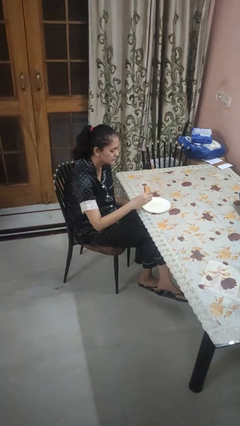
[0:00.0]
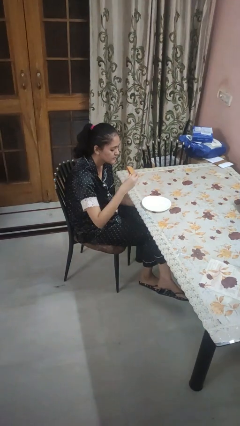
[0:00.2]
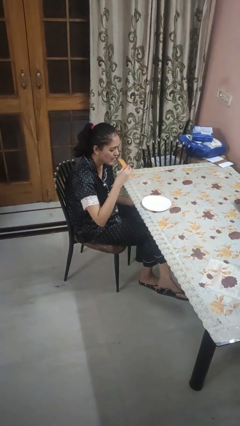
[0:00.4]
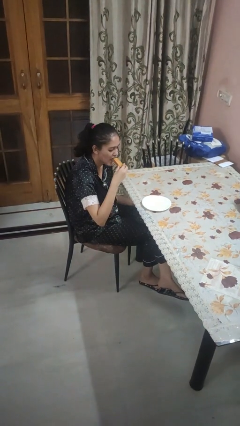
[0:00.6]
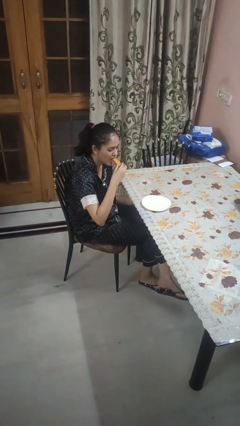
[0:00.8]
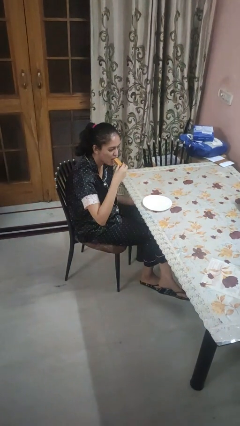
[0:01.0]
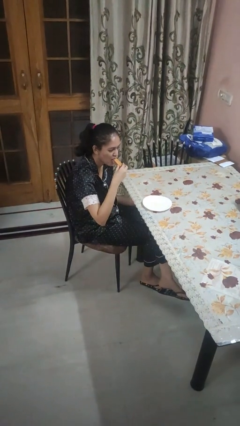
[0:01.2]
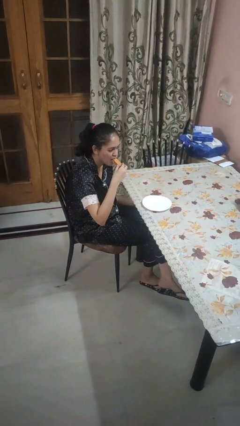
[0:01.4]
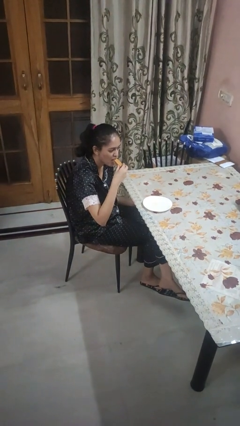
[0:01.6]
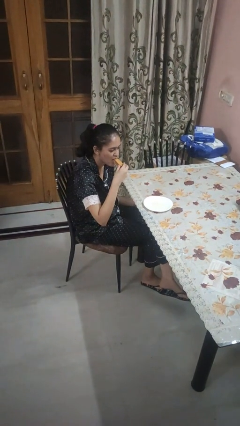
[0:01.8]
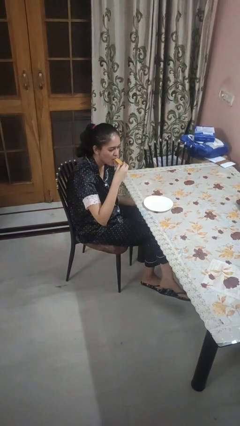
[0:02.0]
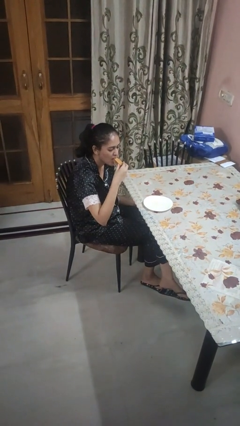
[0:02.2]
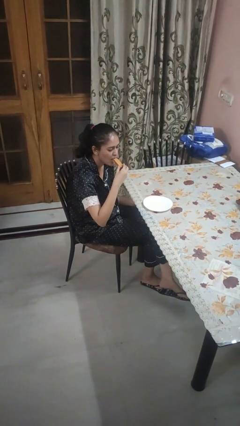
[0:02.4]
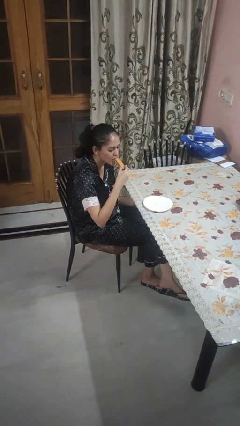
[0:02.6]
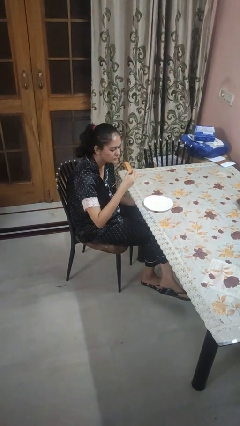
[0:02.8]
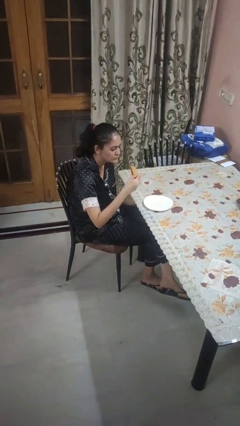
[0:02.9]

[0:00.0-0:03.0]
person eats with hands

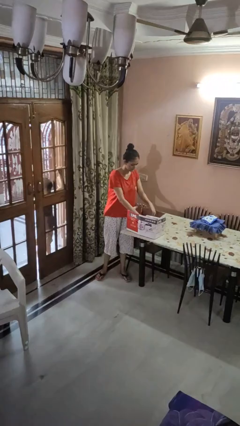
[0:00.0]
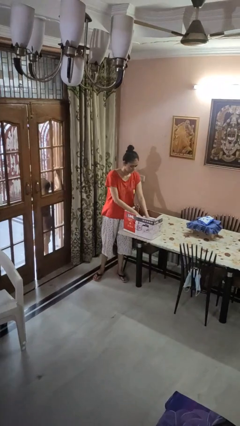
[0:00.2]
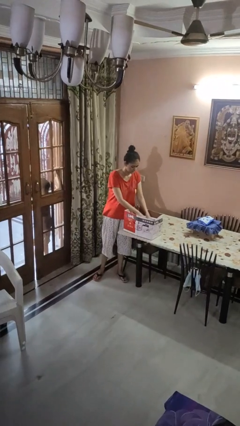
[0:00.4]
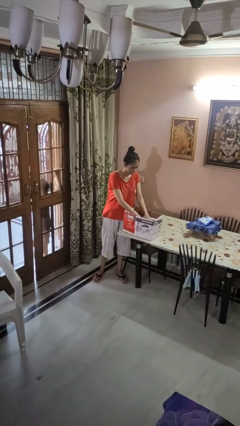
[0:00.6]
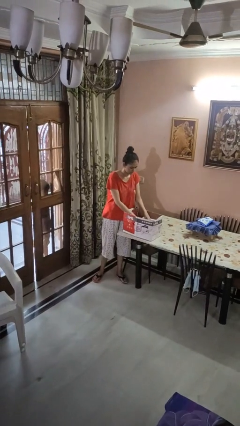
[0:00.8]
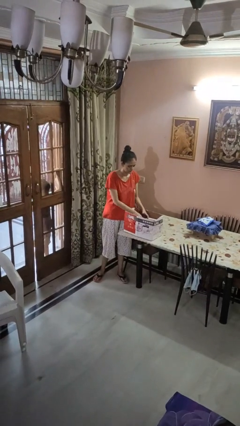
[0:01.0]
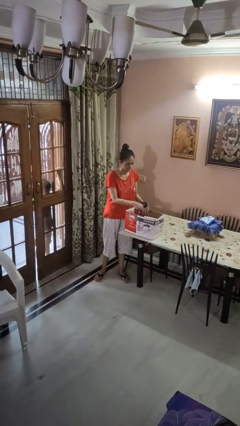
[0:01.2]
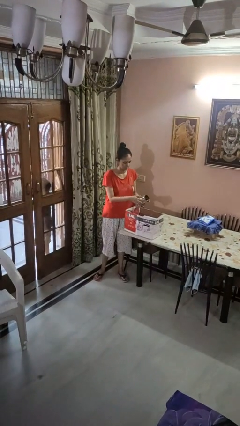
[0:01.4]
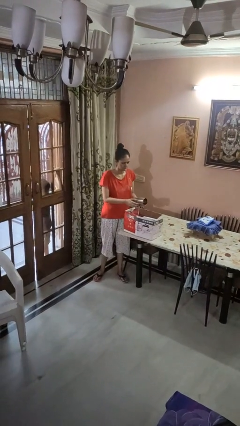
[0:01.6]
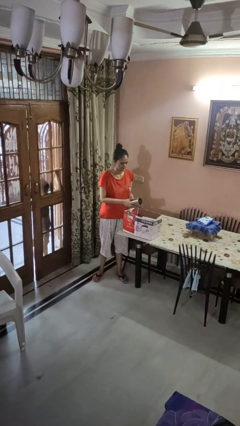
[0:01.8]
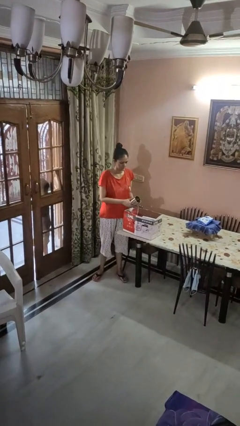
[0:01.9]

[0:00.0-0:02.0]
person takes object from box

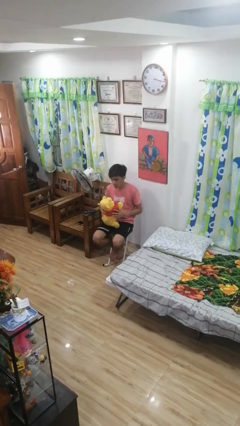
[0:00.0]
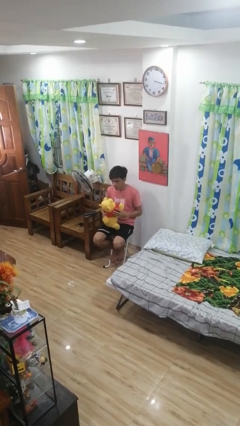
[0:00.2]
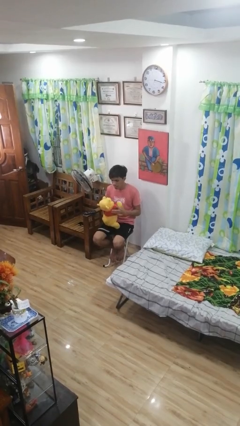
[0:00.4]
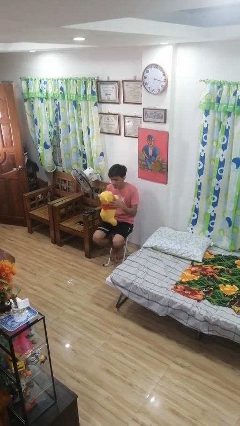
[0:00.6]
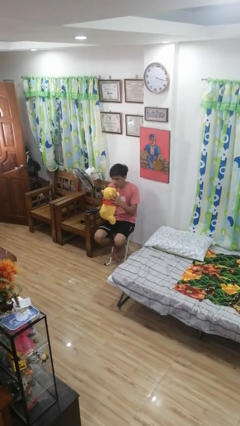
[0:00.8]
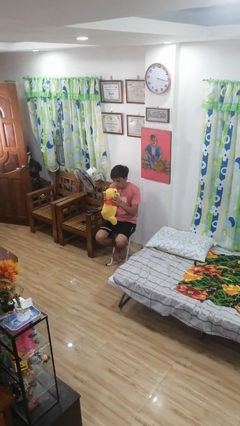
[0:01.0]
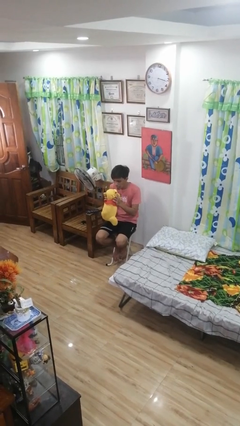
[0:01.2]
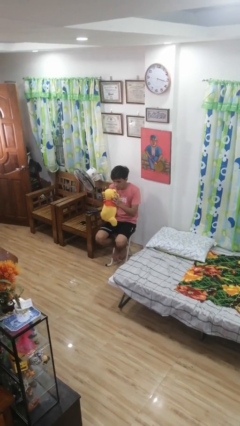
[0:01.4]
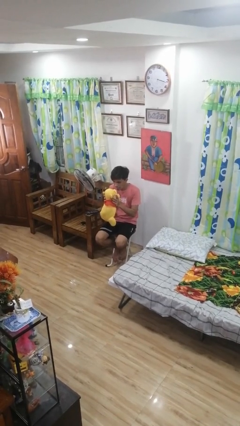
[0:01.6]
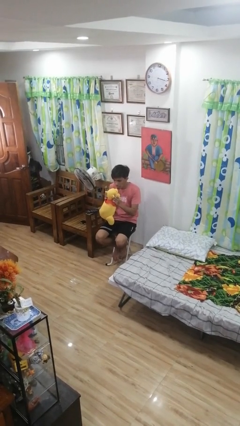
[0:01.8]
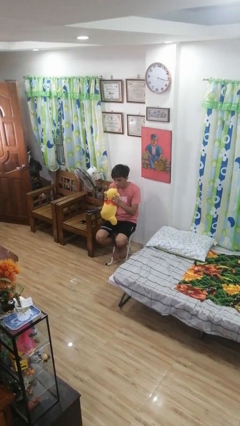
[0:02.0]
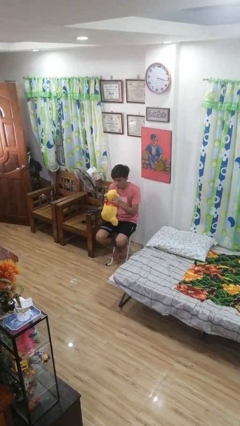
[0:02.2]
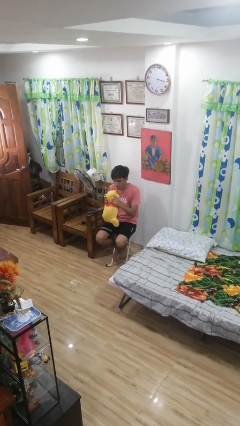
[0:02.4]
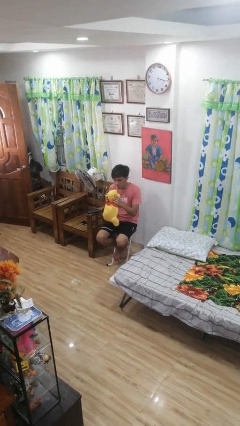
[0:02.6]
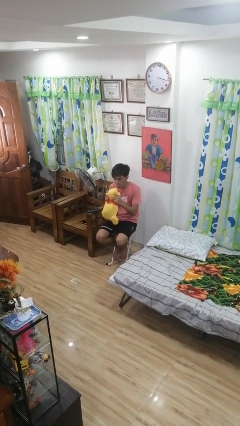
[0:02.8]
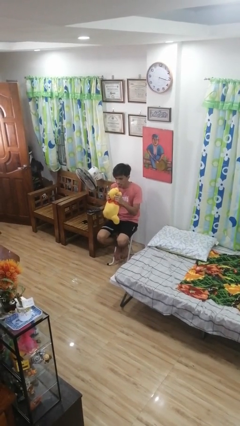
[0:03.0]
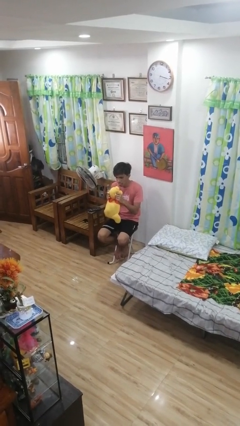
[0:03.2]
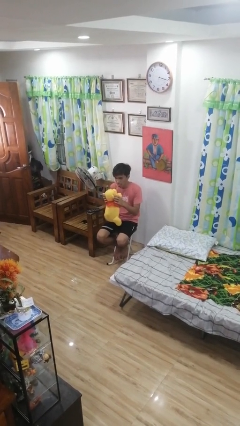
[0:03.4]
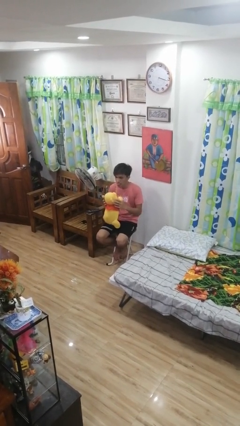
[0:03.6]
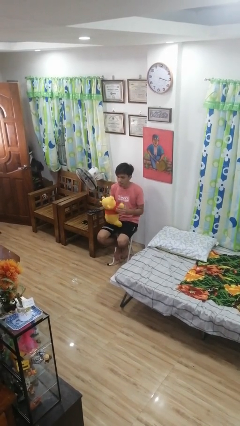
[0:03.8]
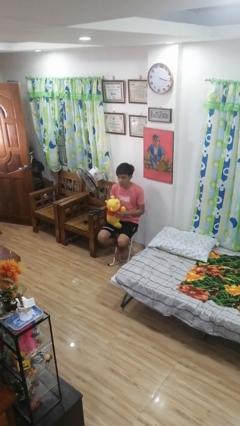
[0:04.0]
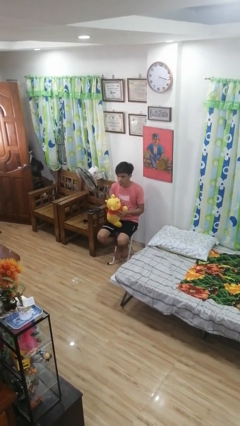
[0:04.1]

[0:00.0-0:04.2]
person squeezes object

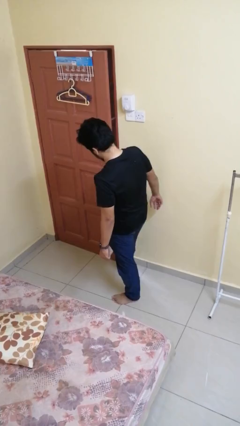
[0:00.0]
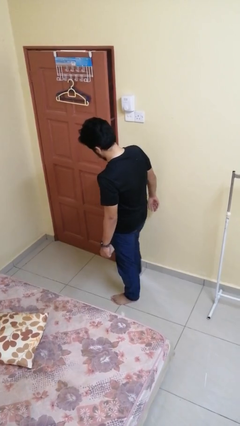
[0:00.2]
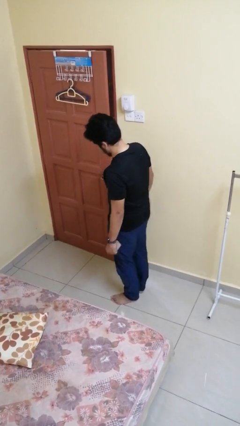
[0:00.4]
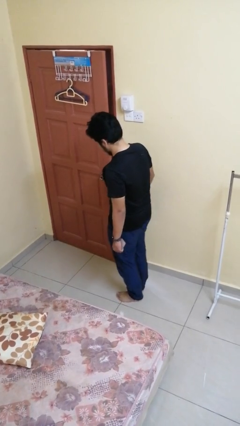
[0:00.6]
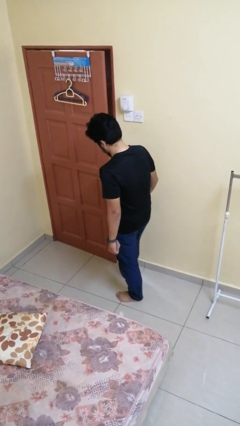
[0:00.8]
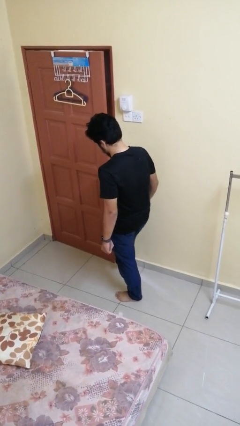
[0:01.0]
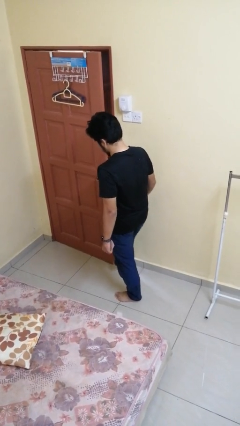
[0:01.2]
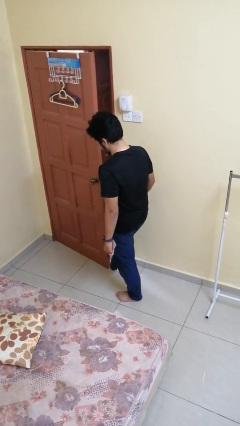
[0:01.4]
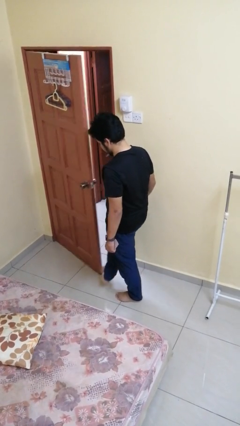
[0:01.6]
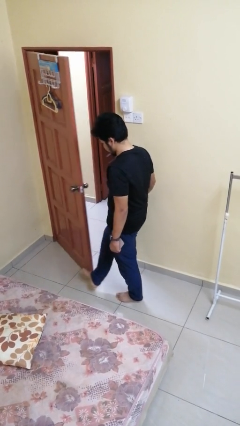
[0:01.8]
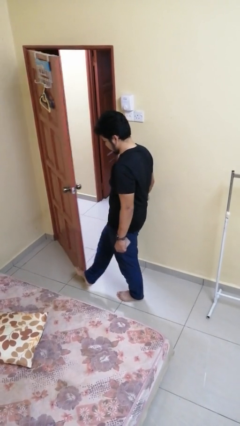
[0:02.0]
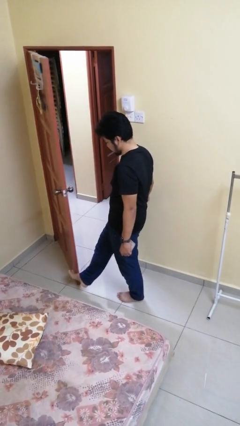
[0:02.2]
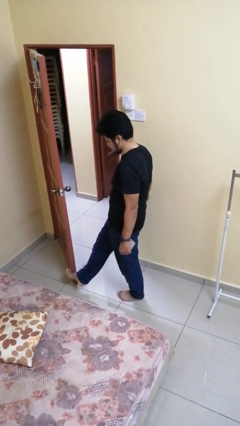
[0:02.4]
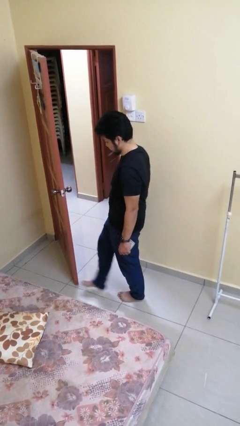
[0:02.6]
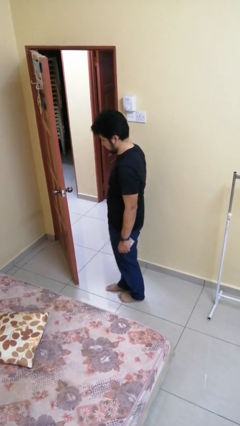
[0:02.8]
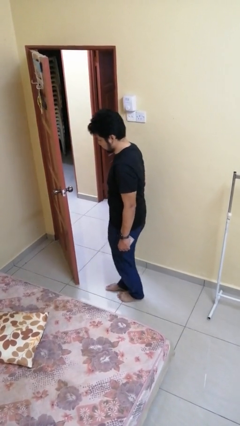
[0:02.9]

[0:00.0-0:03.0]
person opens facility door

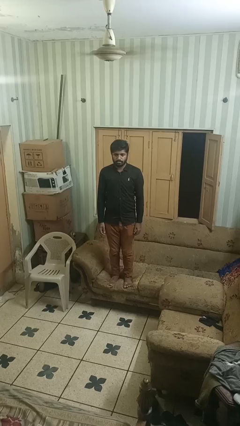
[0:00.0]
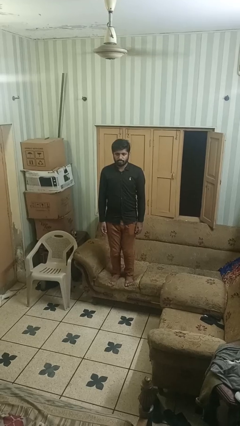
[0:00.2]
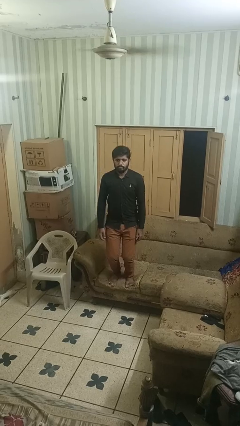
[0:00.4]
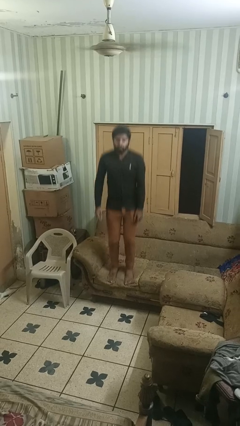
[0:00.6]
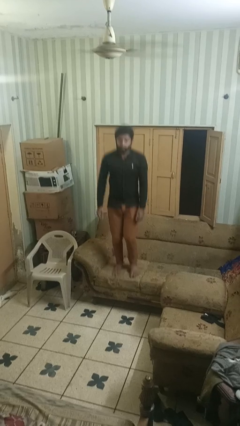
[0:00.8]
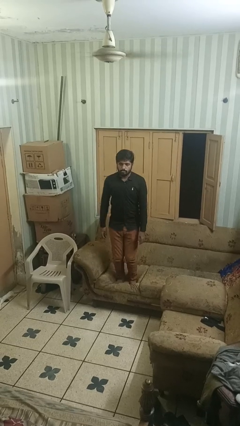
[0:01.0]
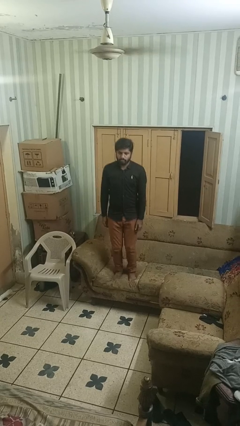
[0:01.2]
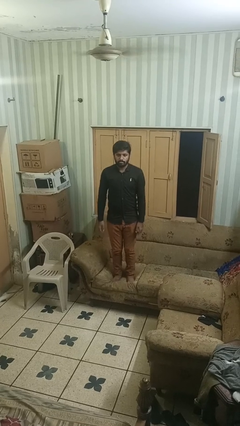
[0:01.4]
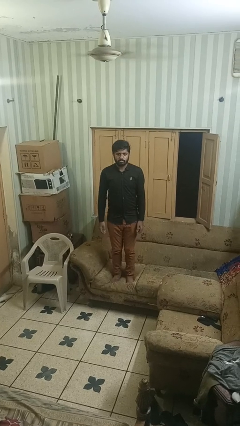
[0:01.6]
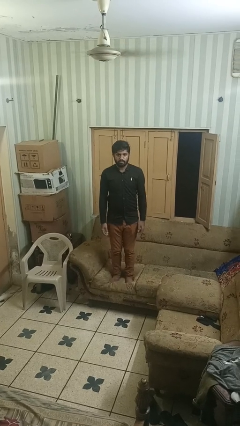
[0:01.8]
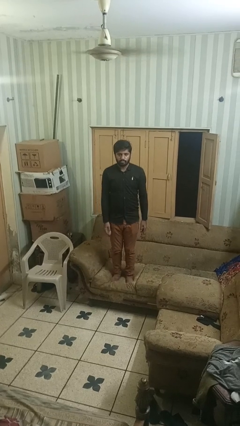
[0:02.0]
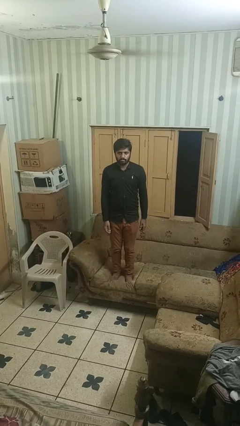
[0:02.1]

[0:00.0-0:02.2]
person jumps on couch

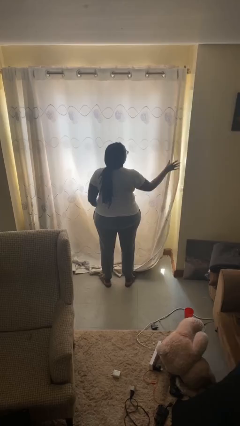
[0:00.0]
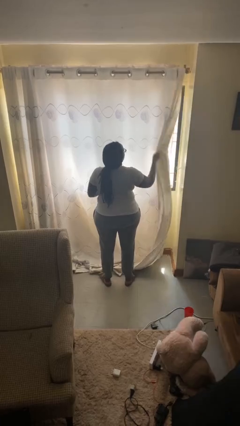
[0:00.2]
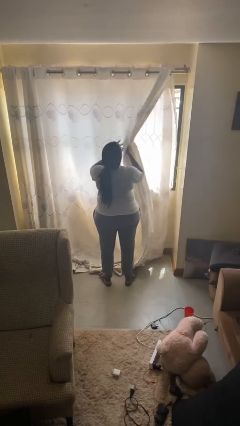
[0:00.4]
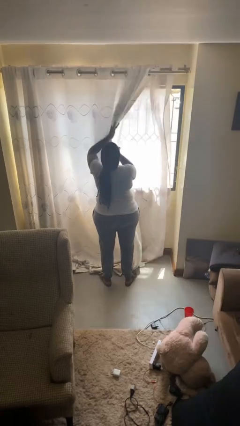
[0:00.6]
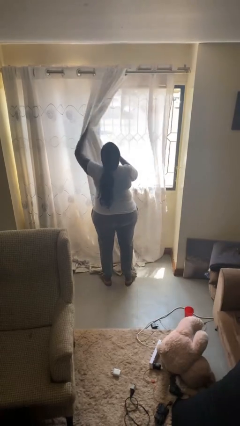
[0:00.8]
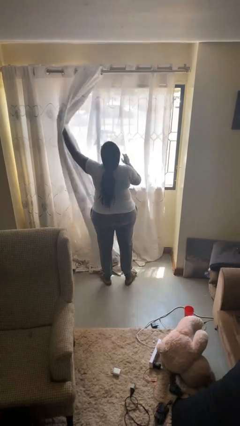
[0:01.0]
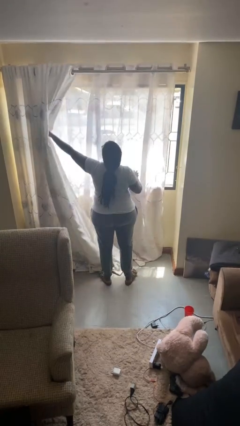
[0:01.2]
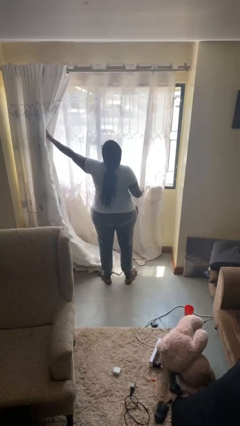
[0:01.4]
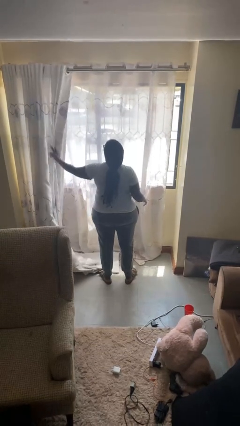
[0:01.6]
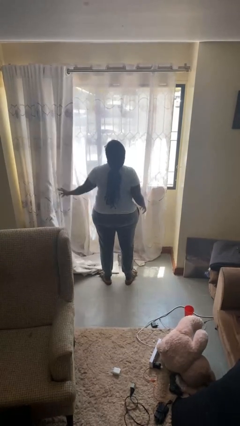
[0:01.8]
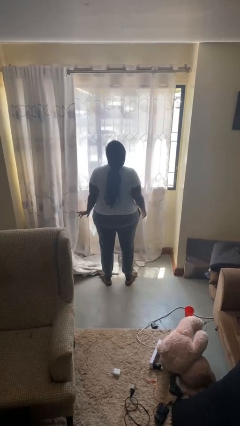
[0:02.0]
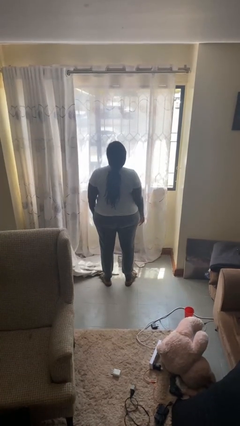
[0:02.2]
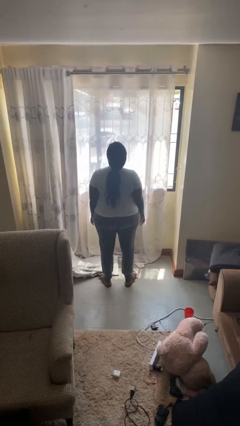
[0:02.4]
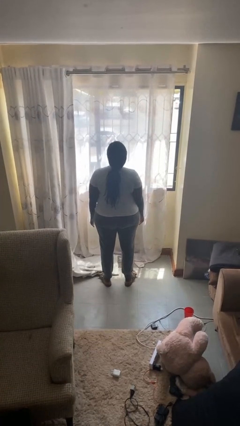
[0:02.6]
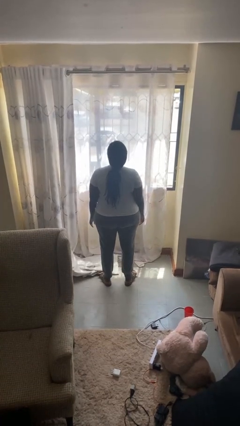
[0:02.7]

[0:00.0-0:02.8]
person opens curtains
